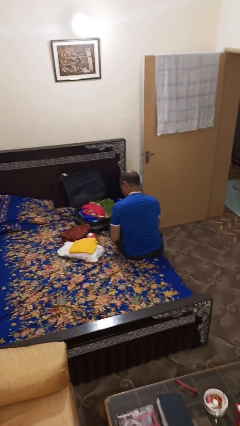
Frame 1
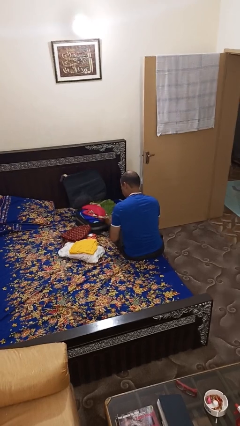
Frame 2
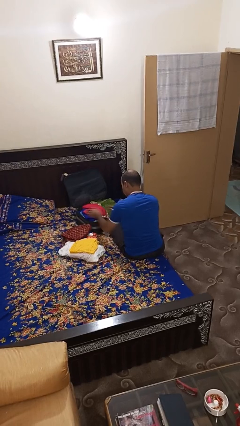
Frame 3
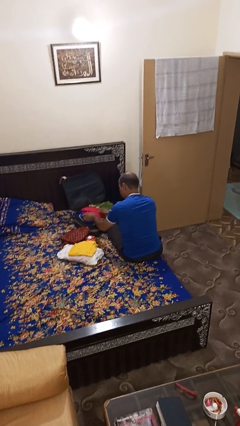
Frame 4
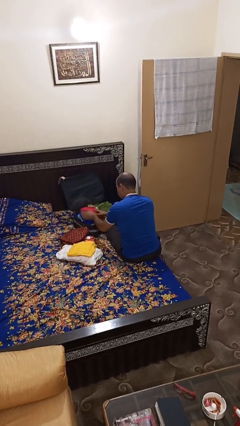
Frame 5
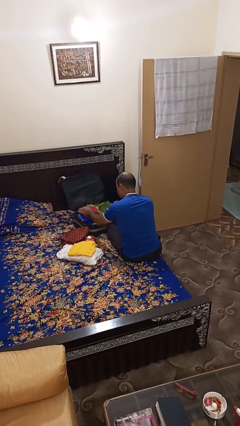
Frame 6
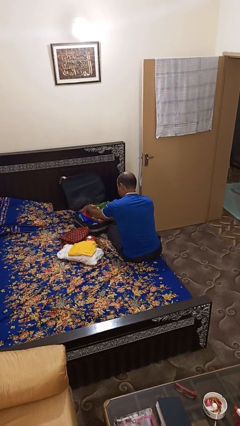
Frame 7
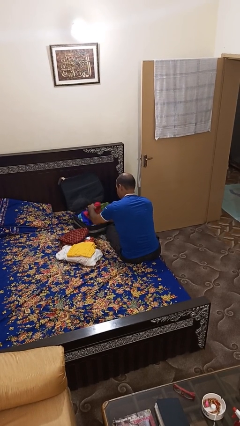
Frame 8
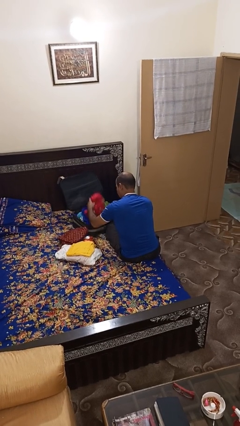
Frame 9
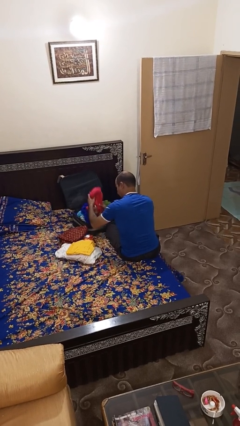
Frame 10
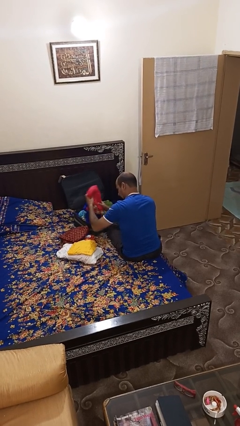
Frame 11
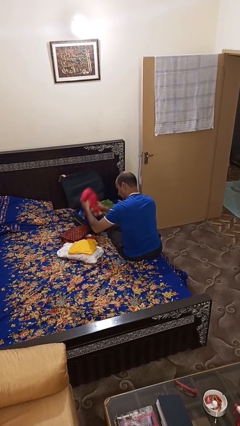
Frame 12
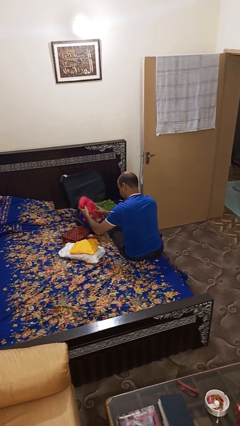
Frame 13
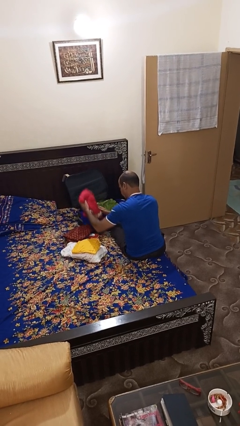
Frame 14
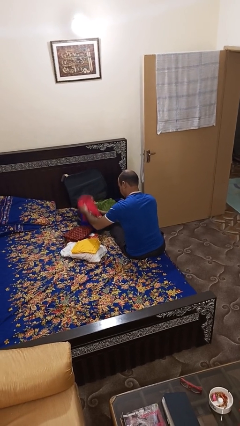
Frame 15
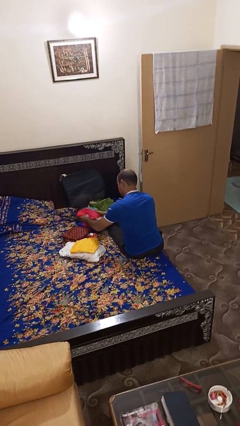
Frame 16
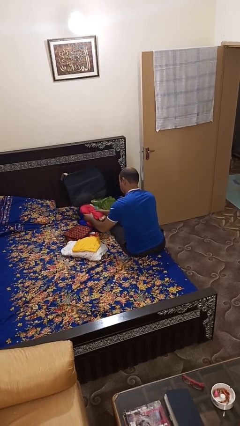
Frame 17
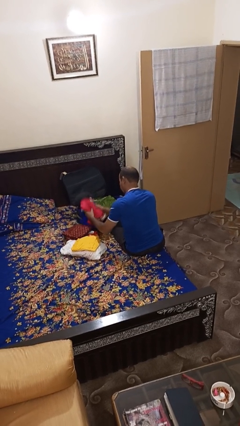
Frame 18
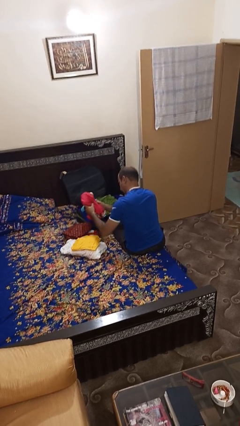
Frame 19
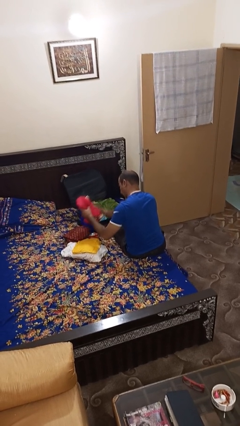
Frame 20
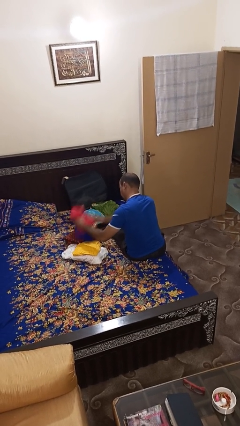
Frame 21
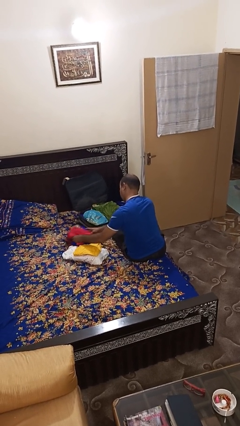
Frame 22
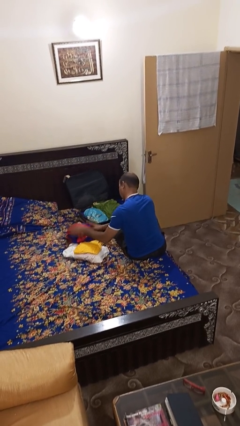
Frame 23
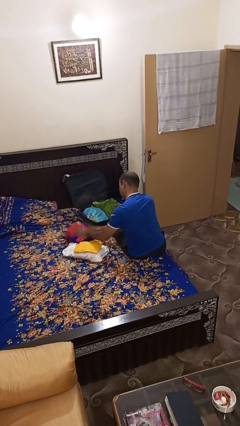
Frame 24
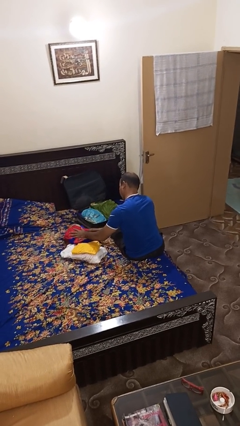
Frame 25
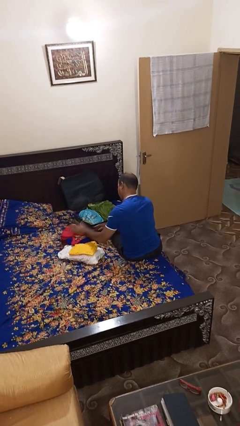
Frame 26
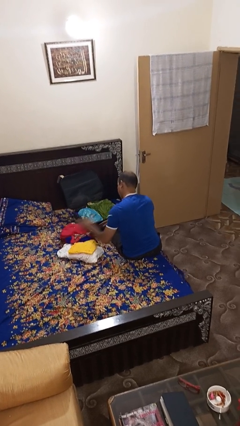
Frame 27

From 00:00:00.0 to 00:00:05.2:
person unloads clothes from suitcase

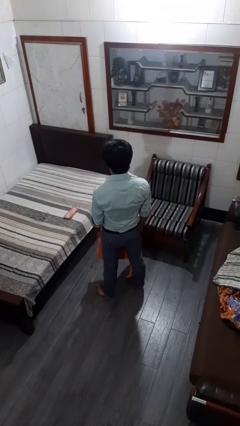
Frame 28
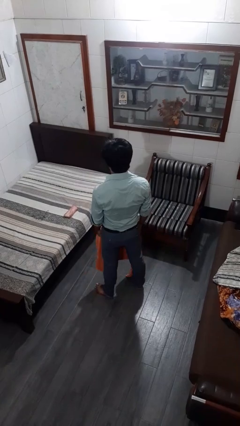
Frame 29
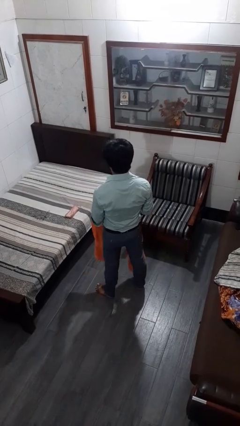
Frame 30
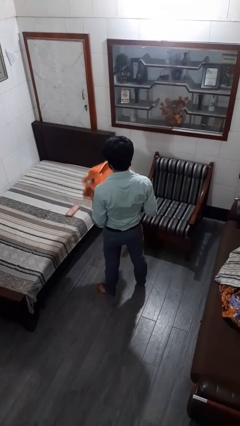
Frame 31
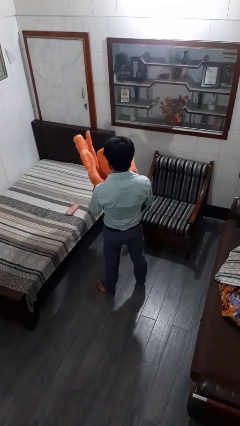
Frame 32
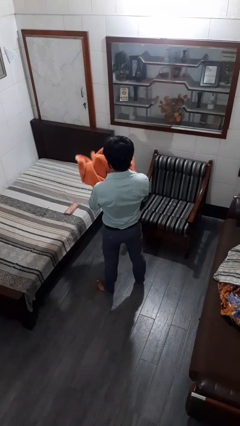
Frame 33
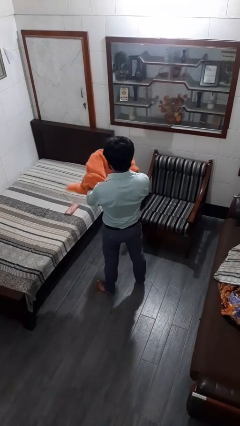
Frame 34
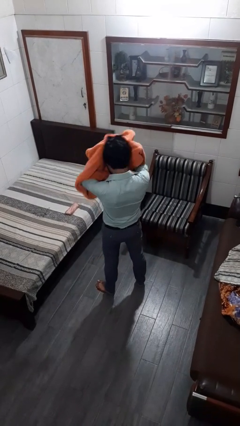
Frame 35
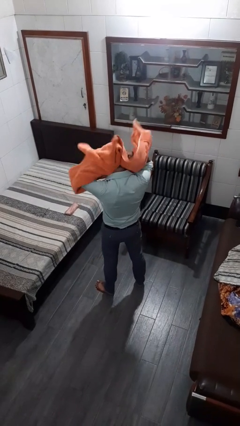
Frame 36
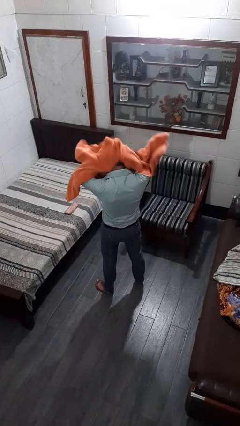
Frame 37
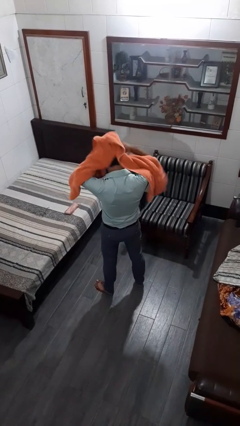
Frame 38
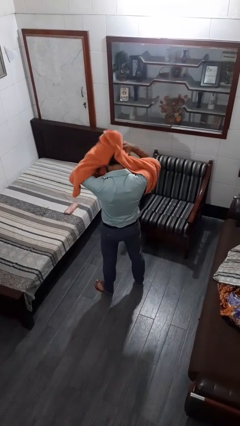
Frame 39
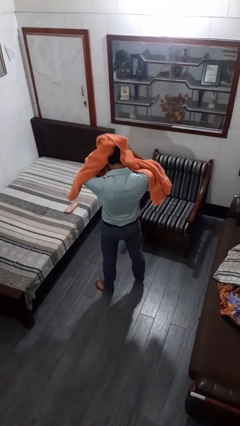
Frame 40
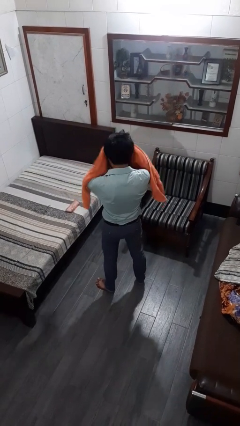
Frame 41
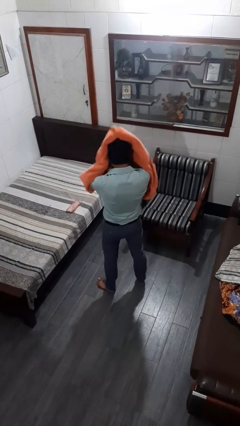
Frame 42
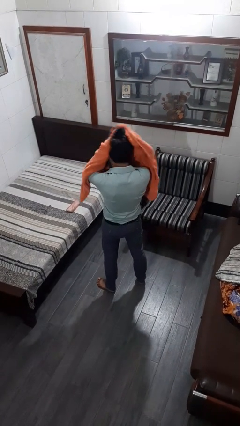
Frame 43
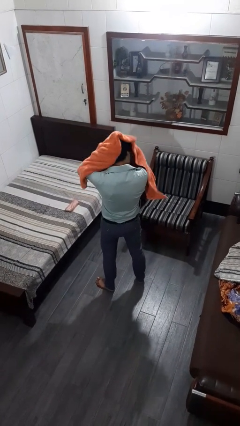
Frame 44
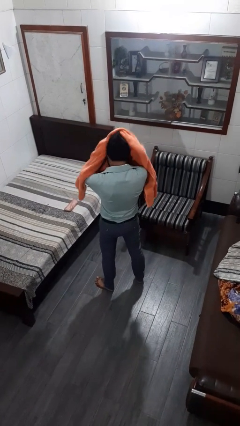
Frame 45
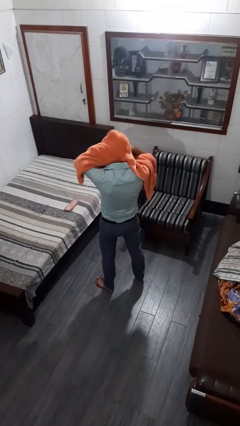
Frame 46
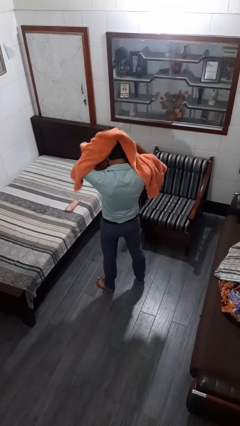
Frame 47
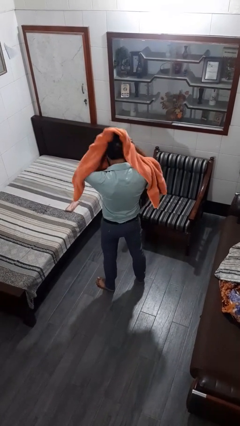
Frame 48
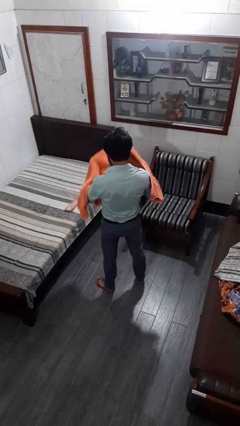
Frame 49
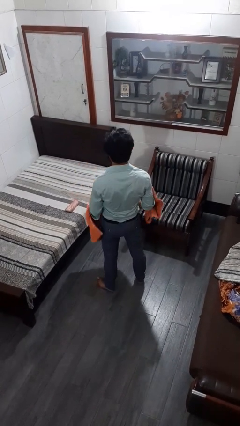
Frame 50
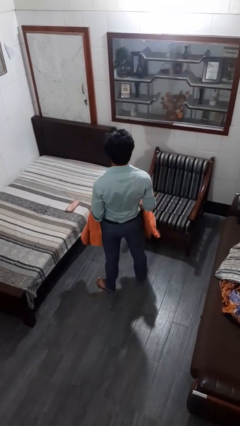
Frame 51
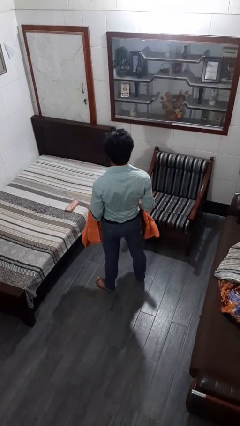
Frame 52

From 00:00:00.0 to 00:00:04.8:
person dries hair with towel

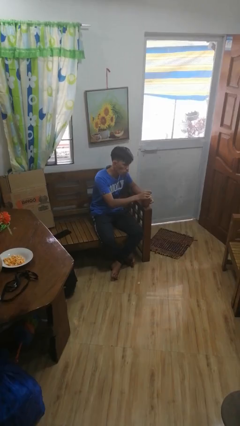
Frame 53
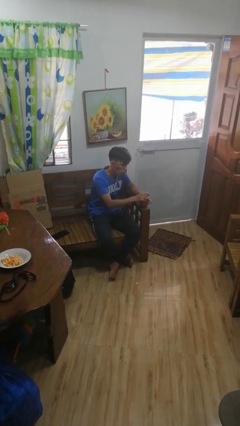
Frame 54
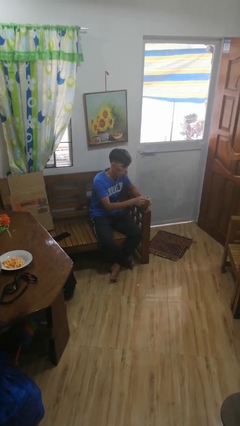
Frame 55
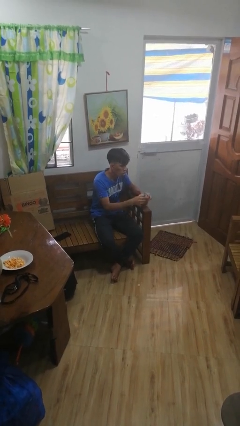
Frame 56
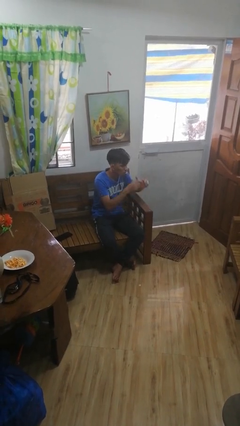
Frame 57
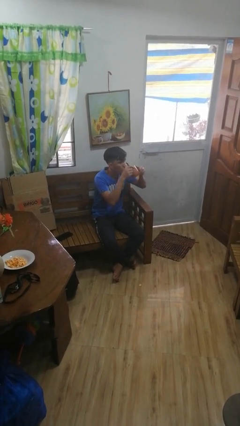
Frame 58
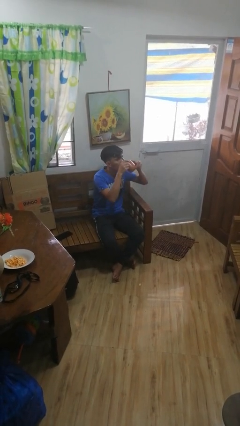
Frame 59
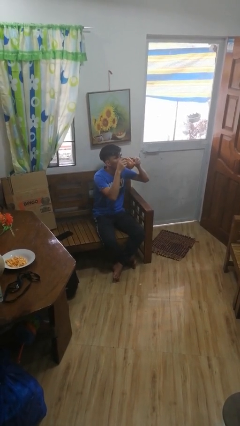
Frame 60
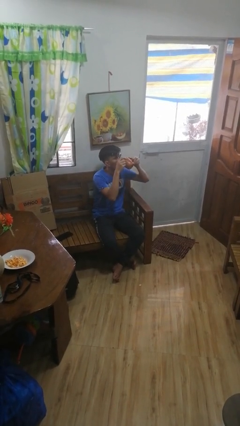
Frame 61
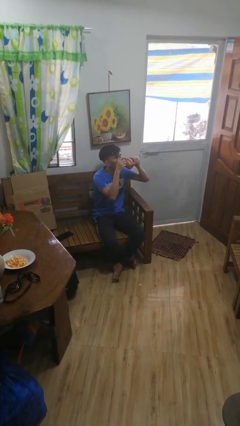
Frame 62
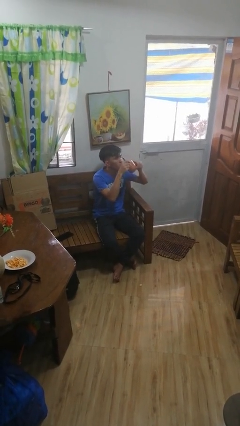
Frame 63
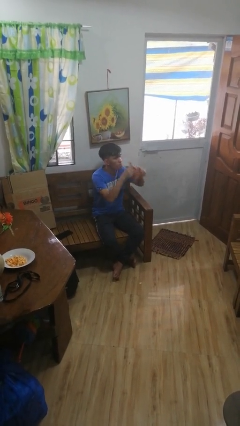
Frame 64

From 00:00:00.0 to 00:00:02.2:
person drinks from mug

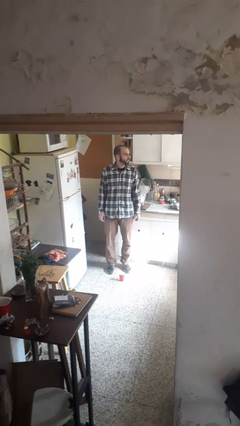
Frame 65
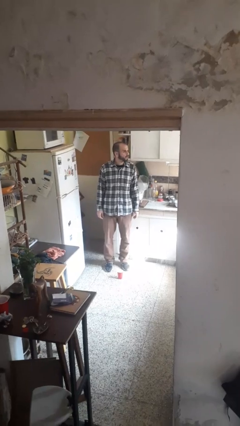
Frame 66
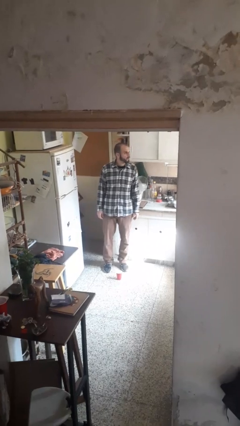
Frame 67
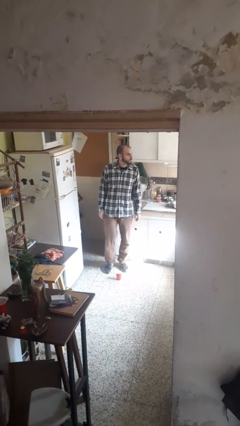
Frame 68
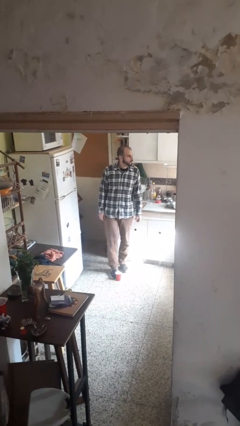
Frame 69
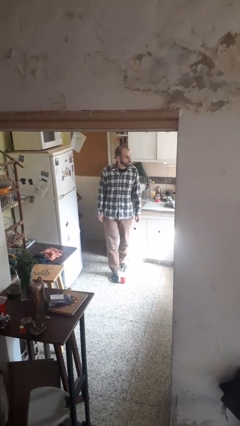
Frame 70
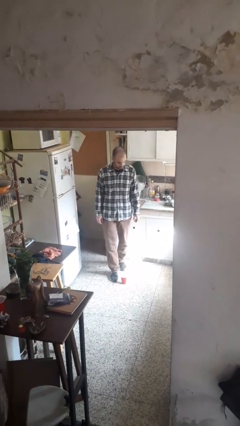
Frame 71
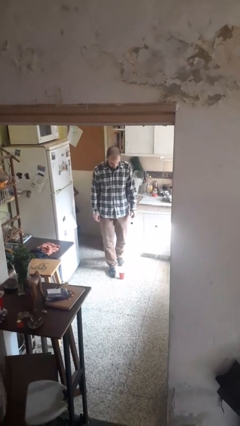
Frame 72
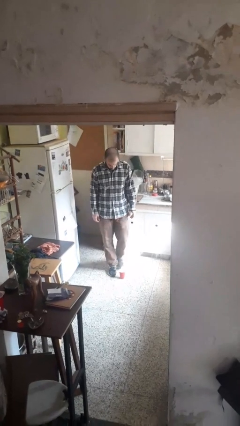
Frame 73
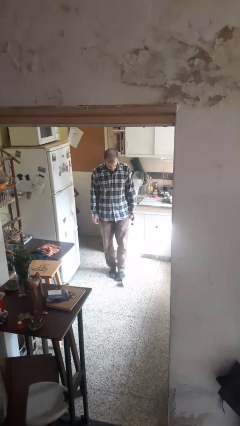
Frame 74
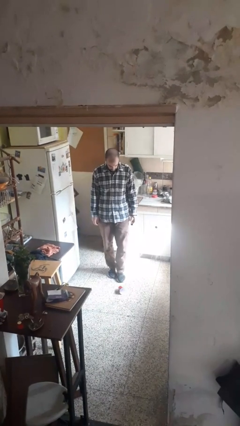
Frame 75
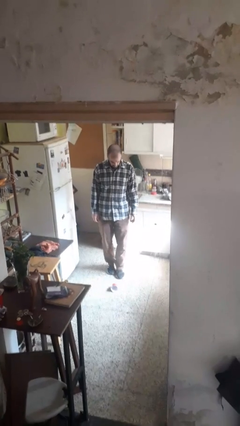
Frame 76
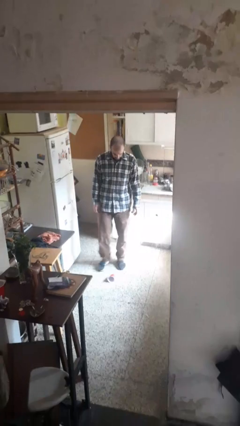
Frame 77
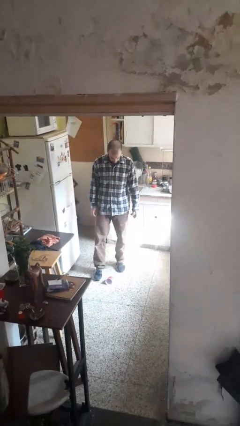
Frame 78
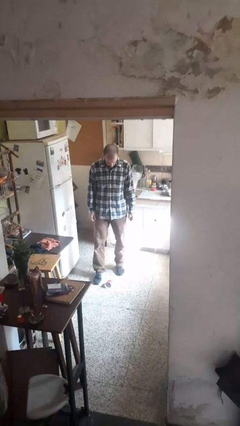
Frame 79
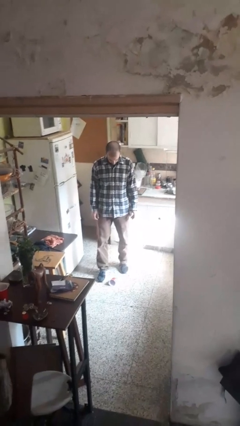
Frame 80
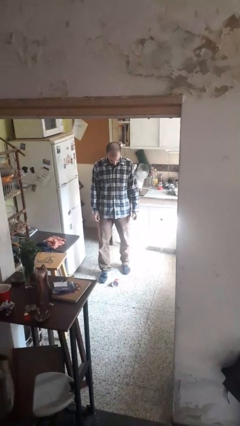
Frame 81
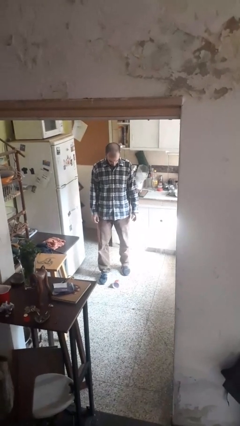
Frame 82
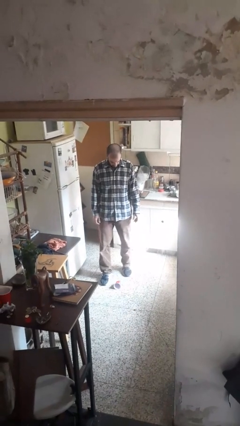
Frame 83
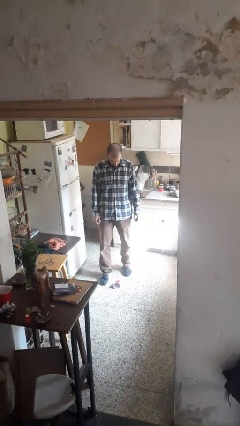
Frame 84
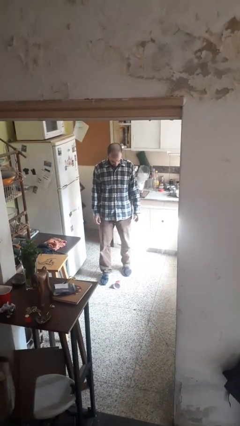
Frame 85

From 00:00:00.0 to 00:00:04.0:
person spills on floor

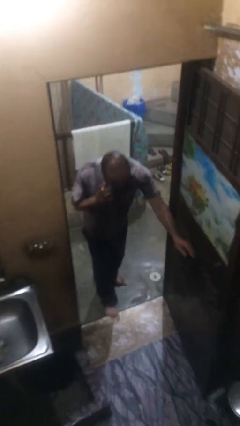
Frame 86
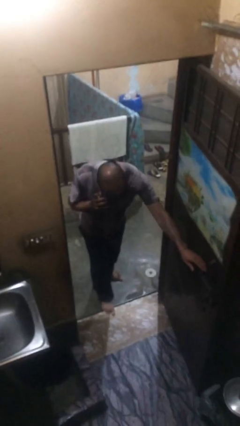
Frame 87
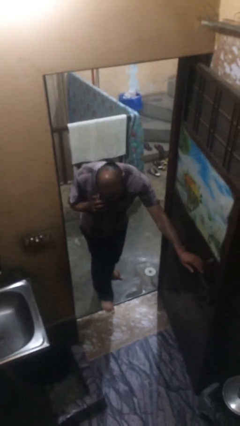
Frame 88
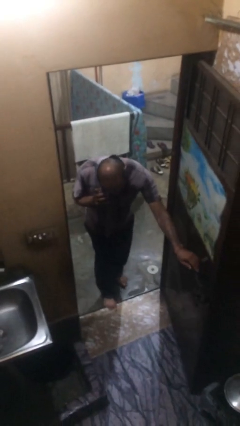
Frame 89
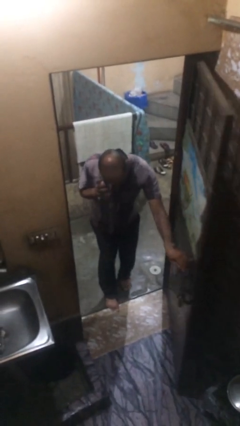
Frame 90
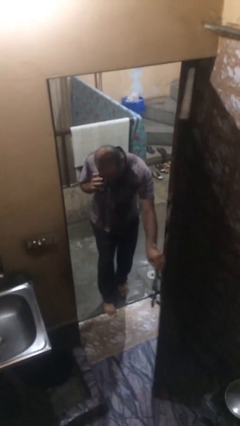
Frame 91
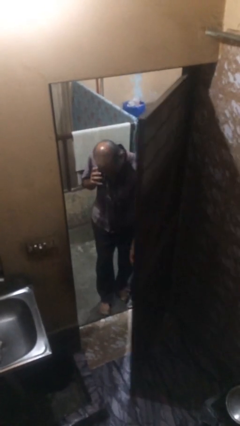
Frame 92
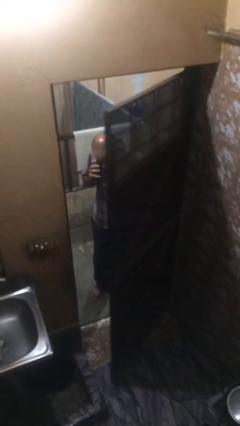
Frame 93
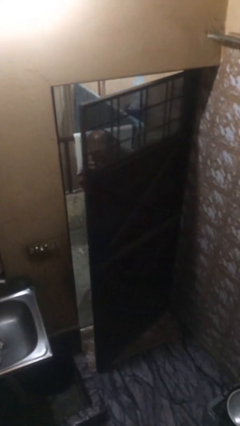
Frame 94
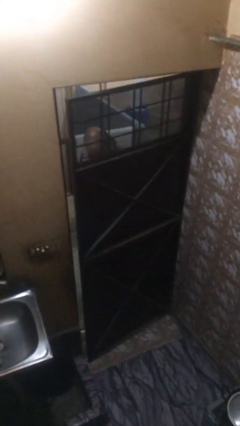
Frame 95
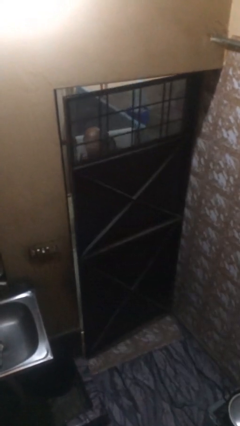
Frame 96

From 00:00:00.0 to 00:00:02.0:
person closes facility door
